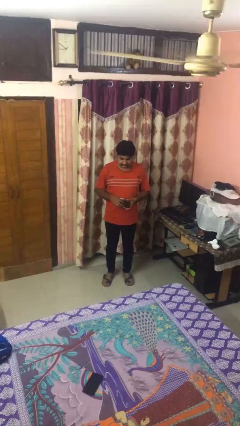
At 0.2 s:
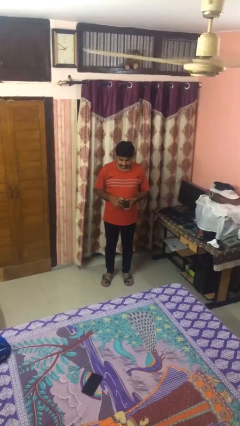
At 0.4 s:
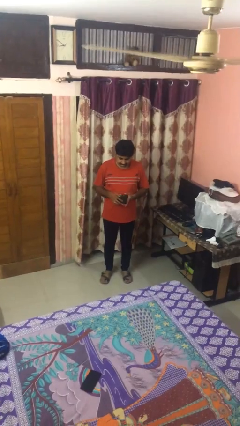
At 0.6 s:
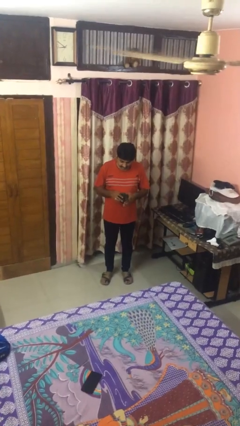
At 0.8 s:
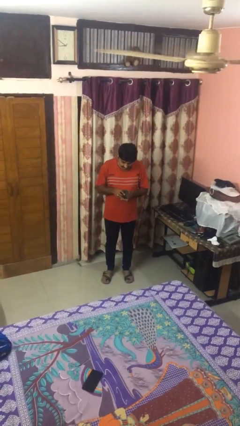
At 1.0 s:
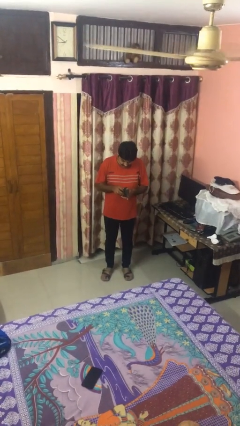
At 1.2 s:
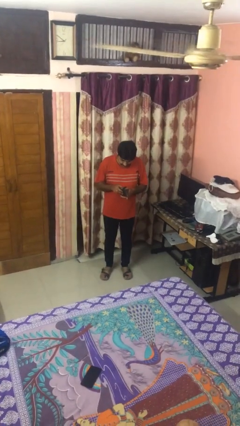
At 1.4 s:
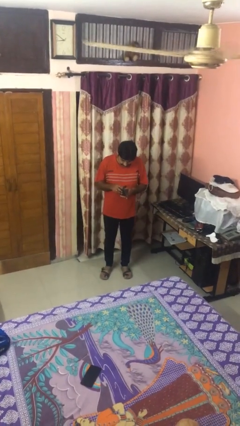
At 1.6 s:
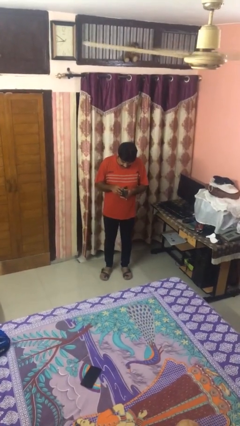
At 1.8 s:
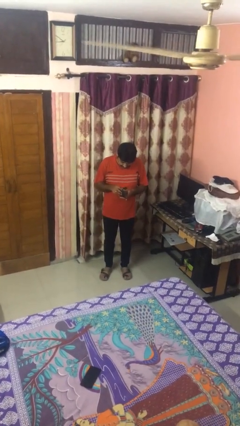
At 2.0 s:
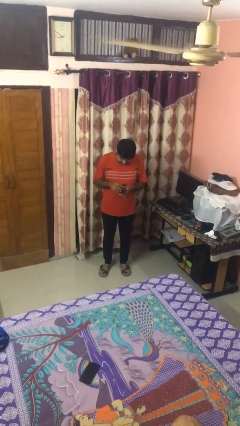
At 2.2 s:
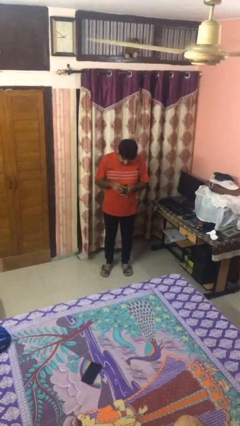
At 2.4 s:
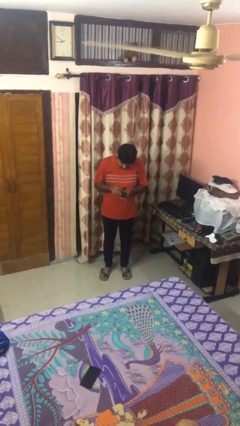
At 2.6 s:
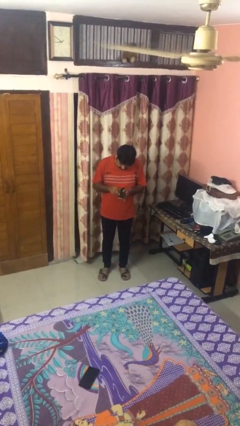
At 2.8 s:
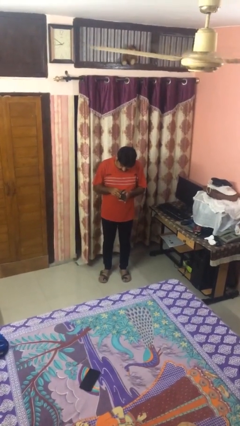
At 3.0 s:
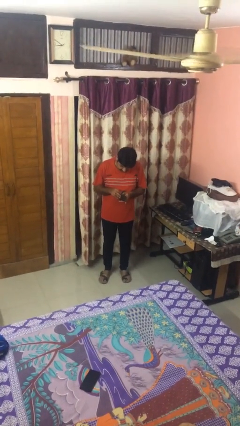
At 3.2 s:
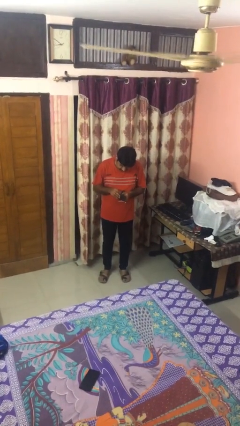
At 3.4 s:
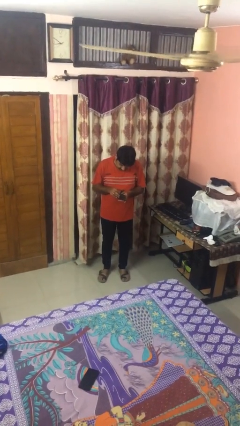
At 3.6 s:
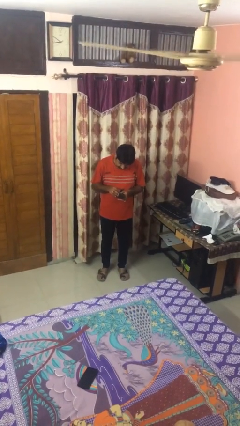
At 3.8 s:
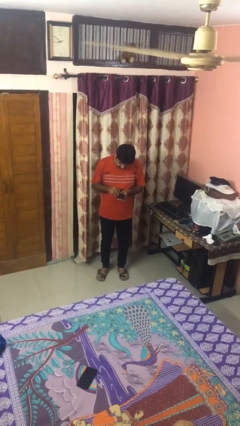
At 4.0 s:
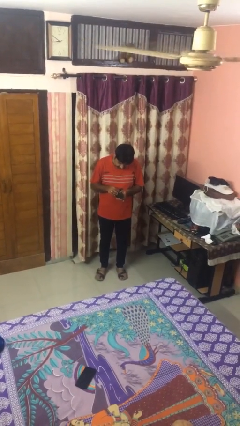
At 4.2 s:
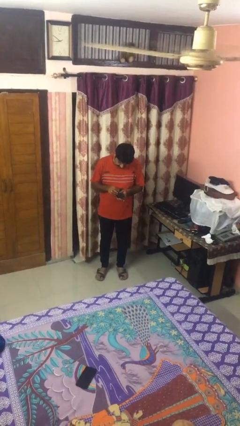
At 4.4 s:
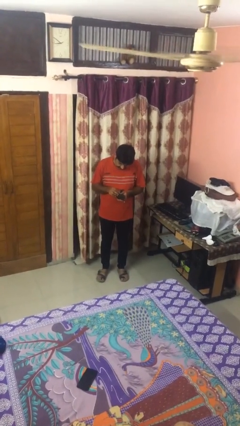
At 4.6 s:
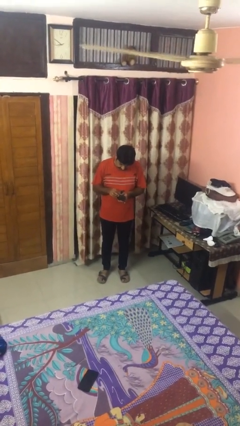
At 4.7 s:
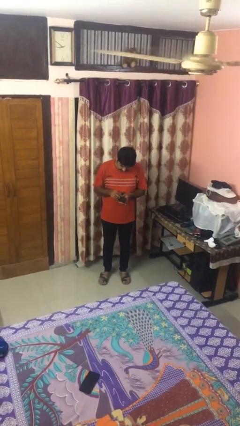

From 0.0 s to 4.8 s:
person searches in purse

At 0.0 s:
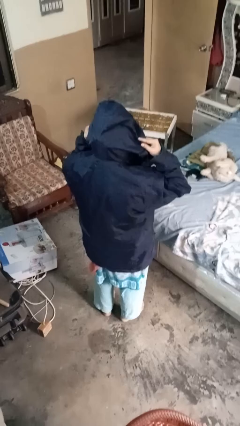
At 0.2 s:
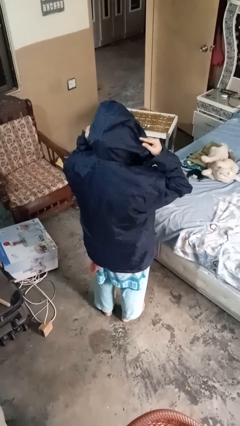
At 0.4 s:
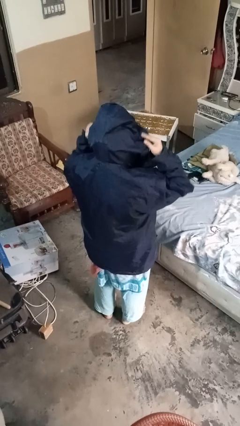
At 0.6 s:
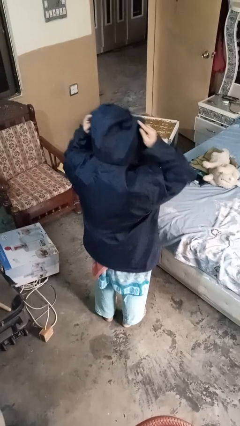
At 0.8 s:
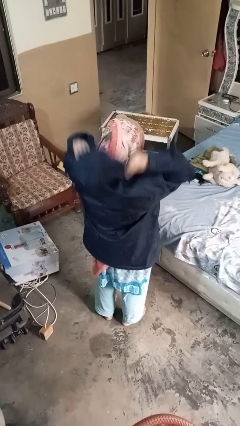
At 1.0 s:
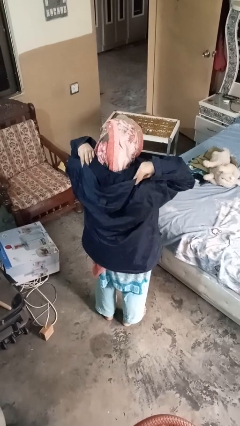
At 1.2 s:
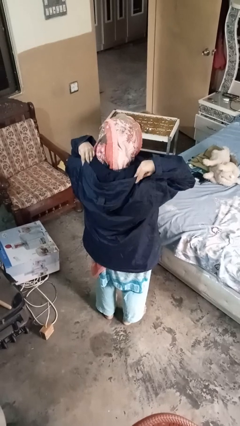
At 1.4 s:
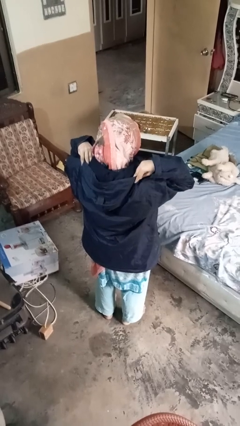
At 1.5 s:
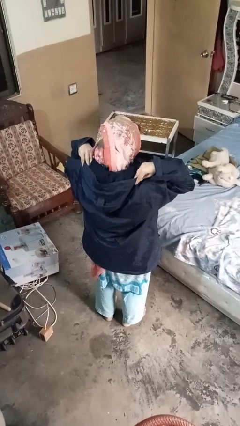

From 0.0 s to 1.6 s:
person takes off hoodie

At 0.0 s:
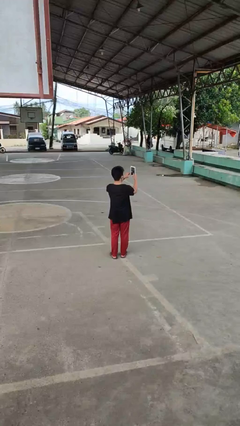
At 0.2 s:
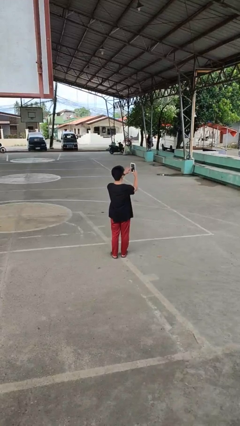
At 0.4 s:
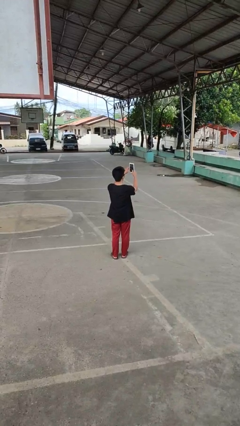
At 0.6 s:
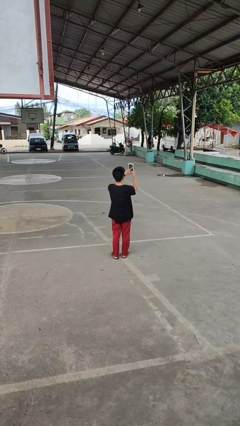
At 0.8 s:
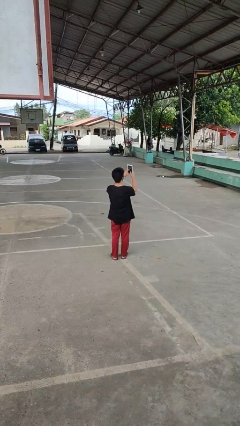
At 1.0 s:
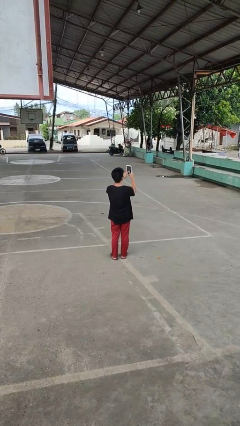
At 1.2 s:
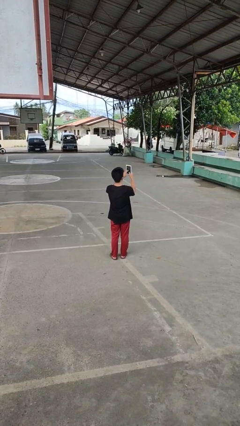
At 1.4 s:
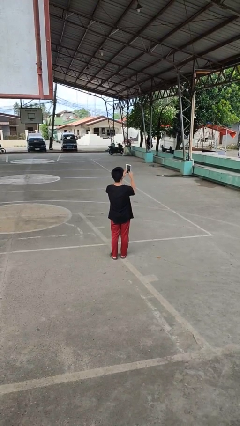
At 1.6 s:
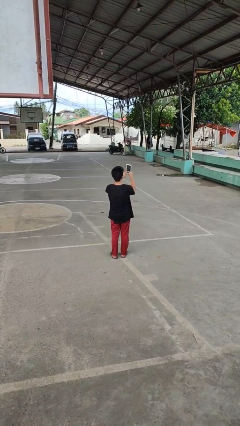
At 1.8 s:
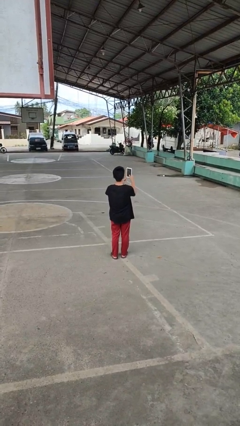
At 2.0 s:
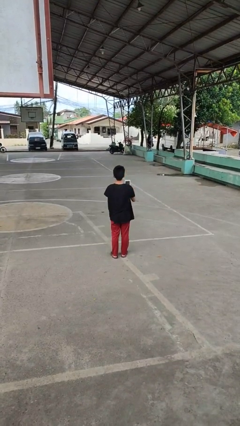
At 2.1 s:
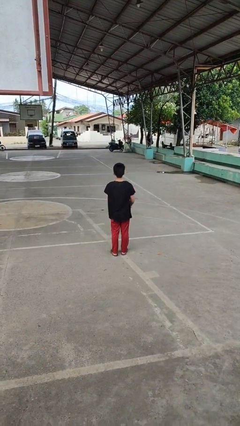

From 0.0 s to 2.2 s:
person interacts with tablet

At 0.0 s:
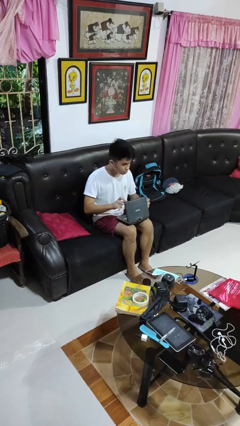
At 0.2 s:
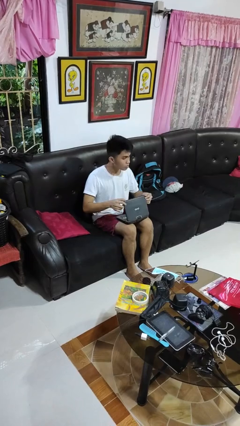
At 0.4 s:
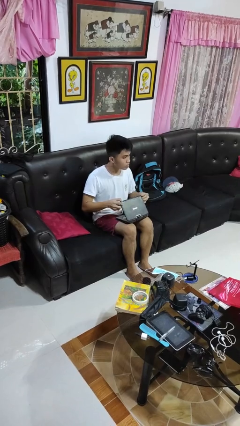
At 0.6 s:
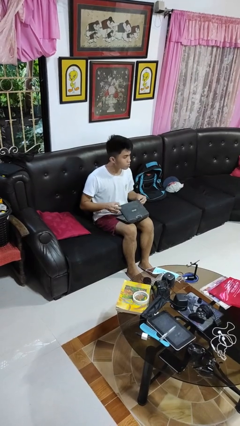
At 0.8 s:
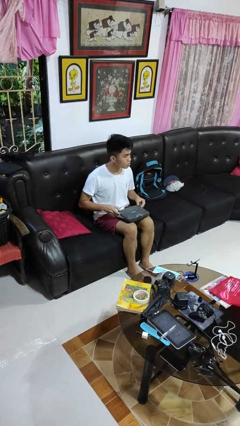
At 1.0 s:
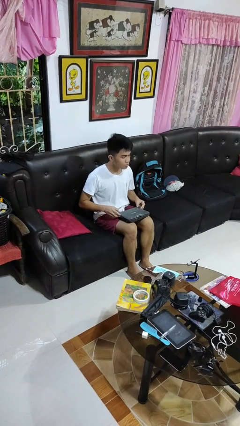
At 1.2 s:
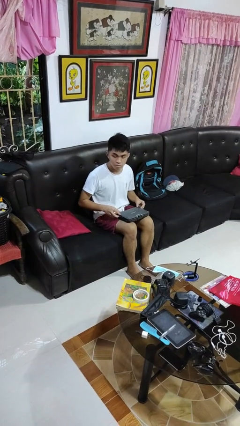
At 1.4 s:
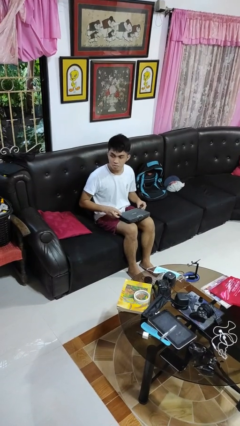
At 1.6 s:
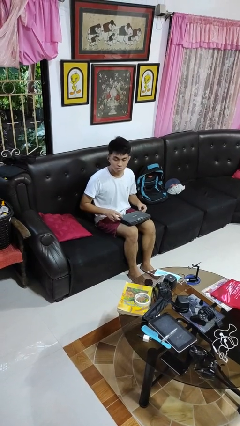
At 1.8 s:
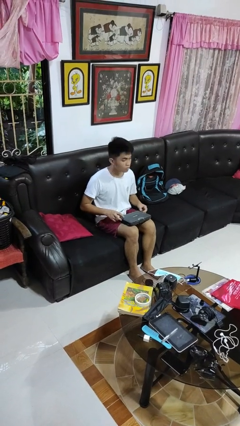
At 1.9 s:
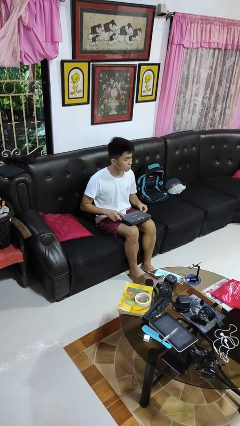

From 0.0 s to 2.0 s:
person closes laptop

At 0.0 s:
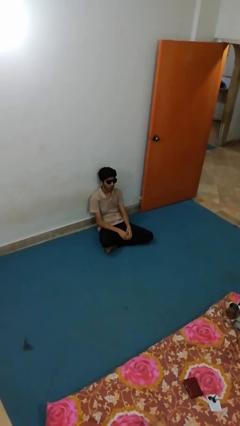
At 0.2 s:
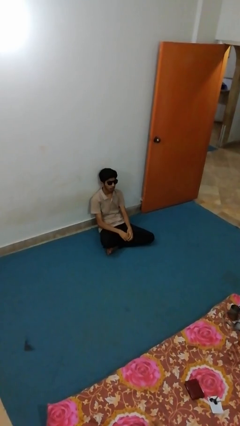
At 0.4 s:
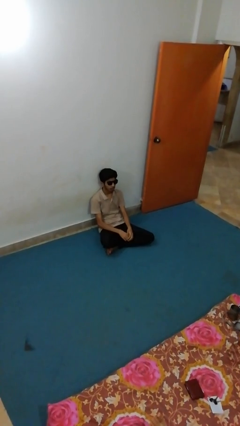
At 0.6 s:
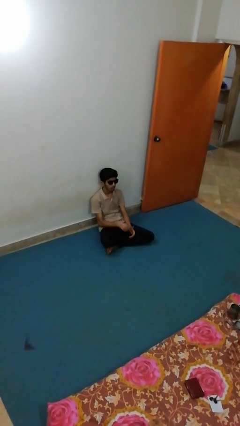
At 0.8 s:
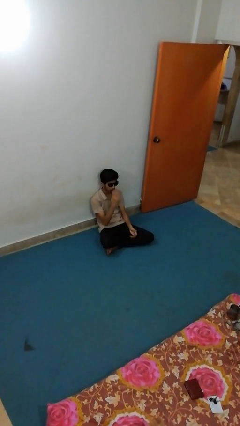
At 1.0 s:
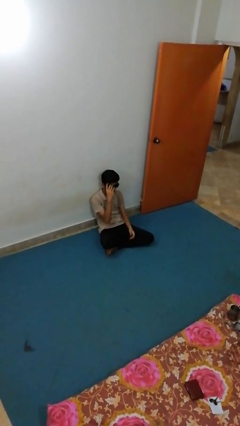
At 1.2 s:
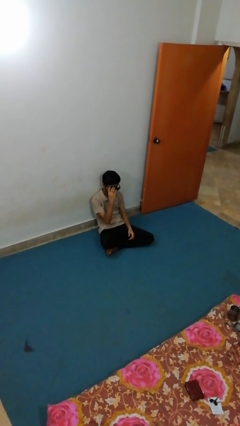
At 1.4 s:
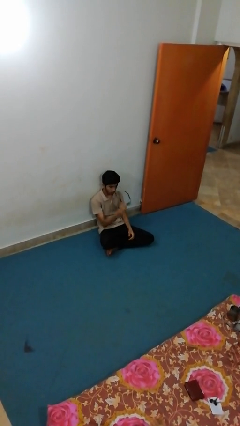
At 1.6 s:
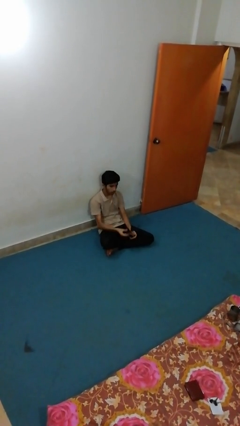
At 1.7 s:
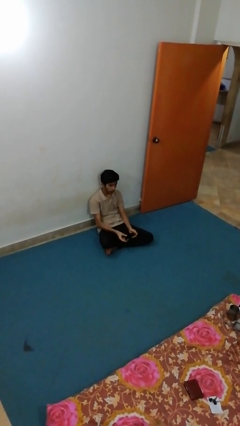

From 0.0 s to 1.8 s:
person takes off sunglasses

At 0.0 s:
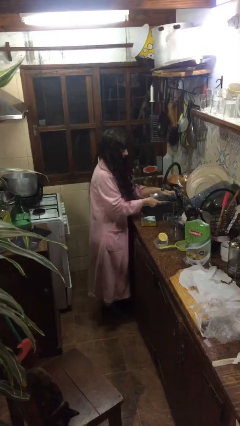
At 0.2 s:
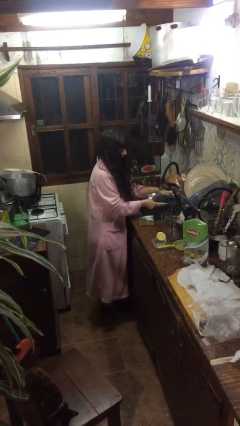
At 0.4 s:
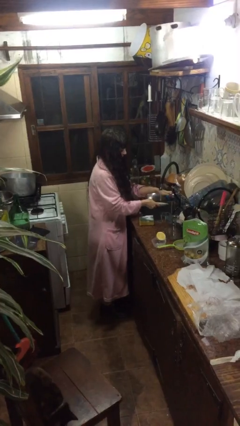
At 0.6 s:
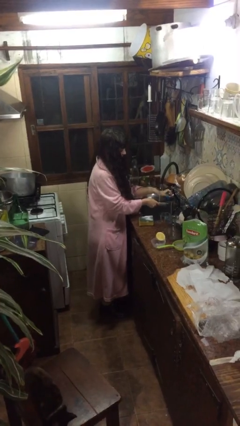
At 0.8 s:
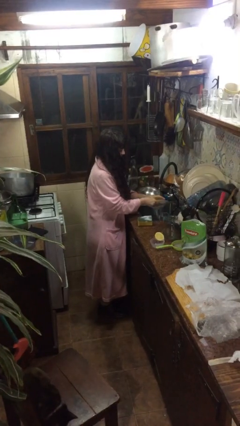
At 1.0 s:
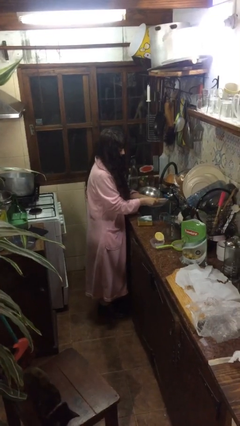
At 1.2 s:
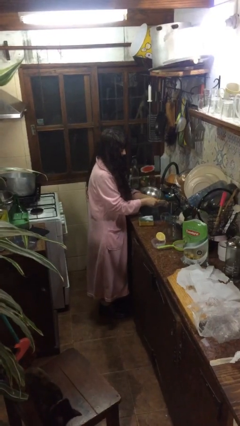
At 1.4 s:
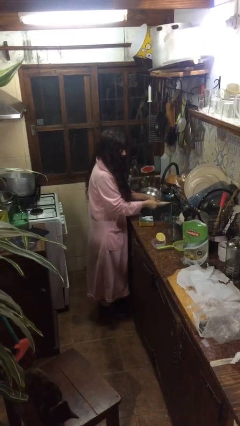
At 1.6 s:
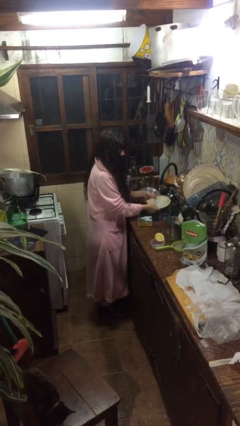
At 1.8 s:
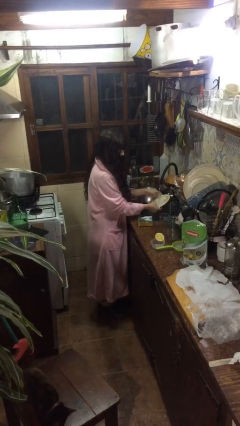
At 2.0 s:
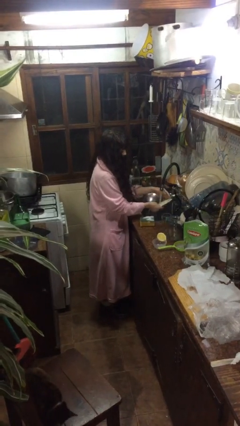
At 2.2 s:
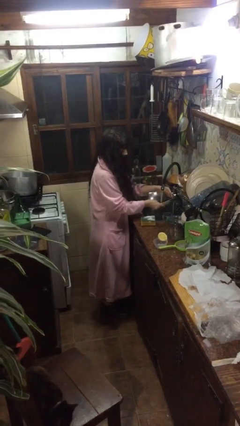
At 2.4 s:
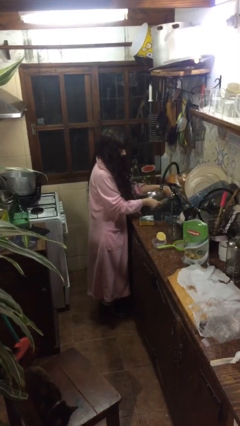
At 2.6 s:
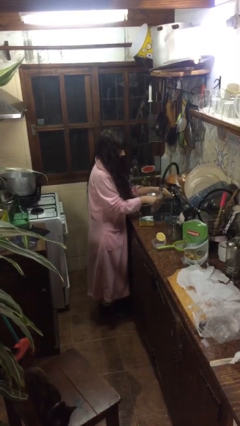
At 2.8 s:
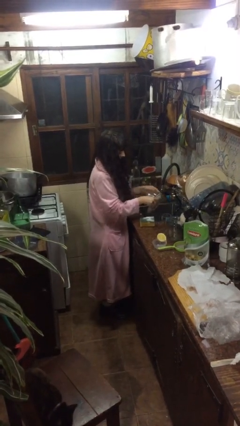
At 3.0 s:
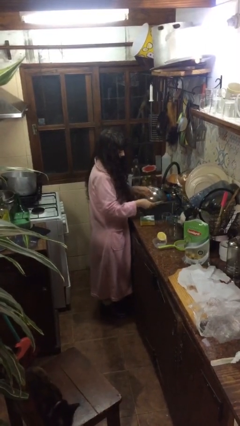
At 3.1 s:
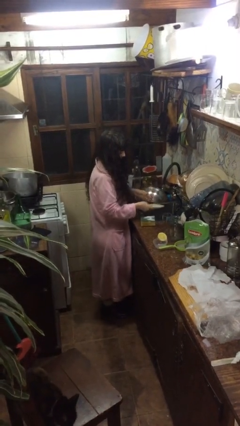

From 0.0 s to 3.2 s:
person washes dish

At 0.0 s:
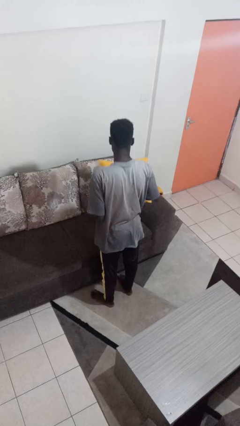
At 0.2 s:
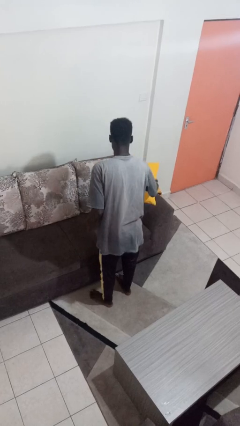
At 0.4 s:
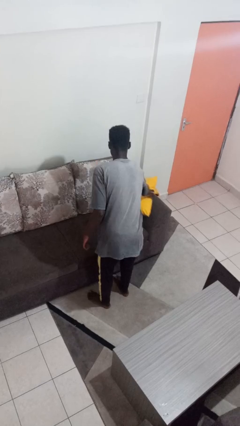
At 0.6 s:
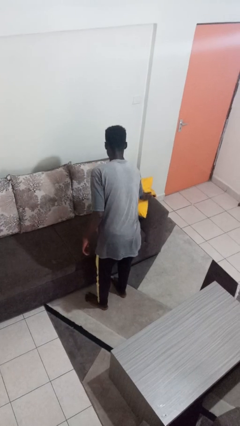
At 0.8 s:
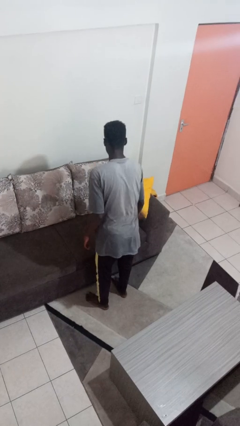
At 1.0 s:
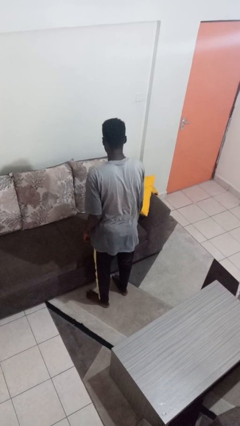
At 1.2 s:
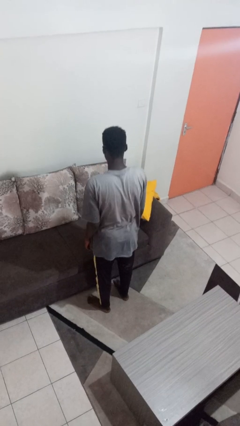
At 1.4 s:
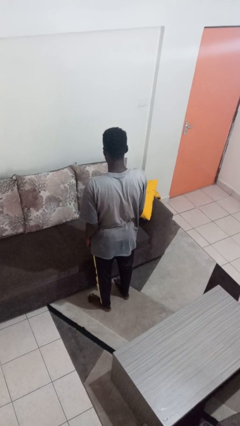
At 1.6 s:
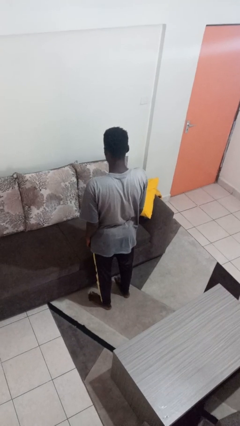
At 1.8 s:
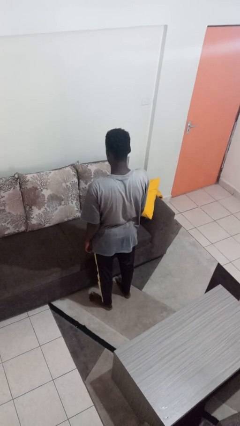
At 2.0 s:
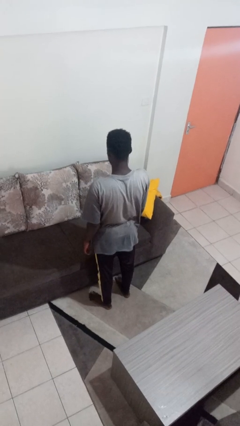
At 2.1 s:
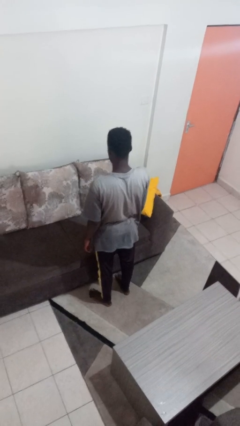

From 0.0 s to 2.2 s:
person puts down object on couch
